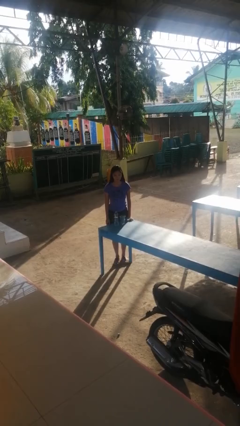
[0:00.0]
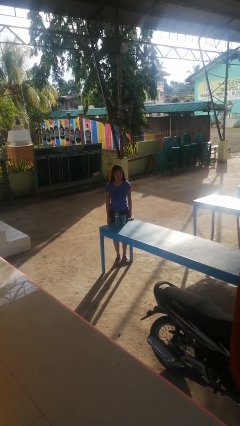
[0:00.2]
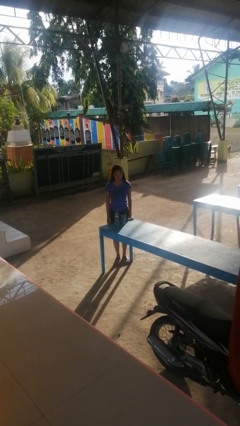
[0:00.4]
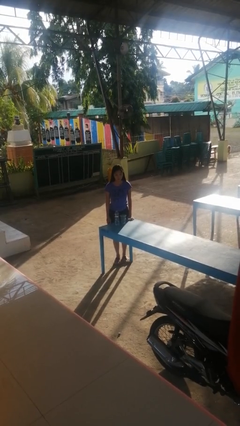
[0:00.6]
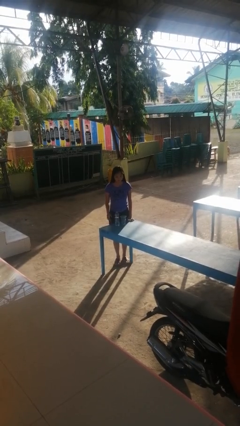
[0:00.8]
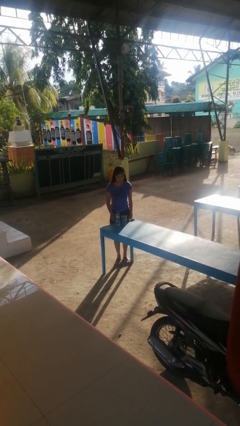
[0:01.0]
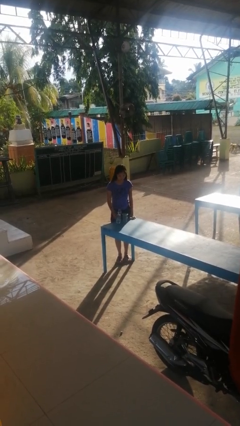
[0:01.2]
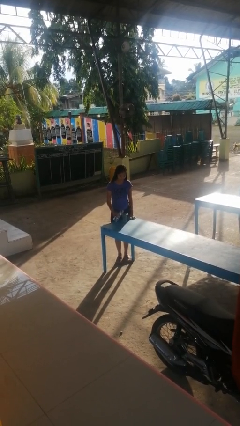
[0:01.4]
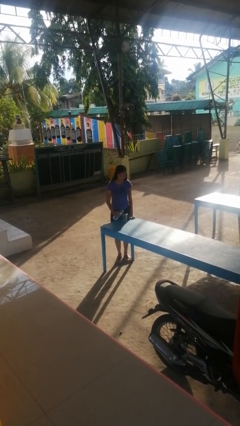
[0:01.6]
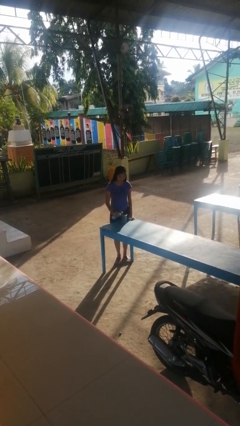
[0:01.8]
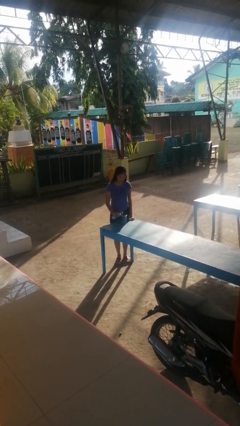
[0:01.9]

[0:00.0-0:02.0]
person pours liquid into cup

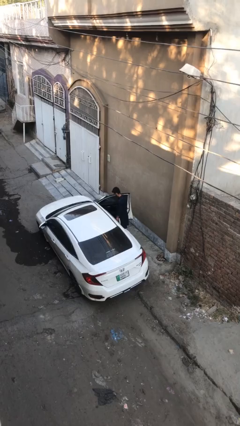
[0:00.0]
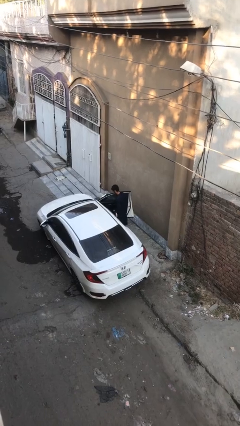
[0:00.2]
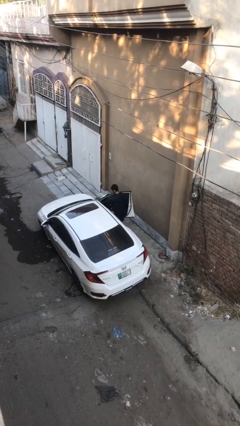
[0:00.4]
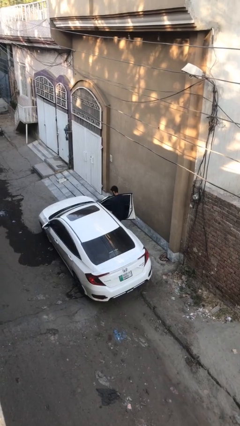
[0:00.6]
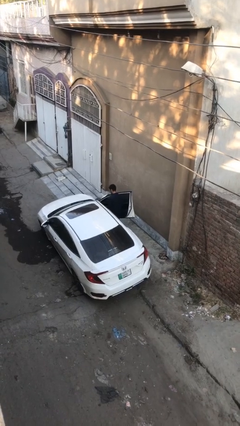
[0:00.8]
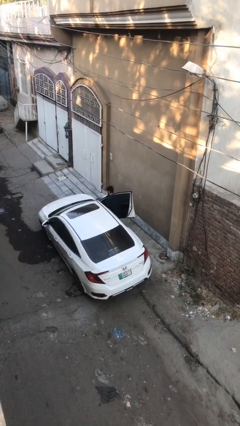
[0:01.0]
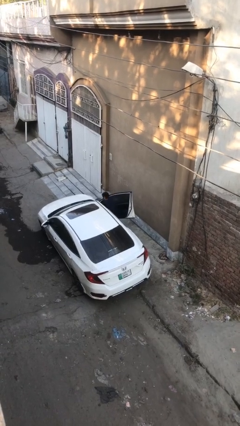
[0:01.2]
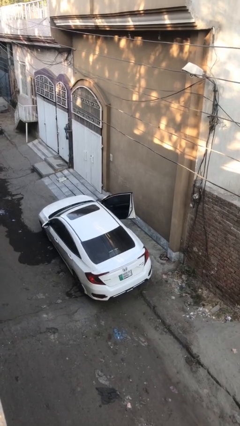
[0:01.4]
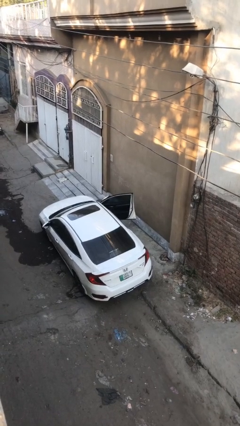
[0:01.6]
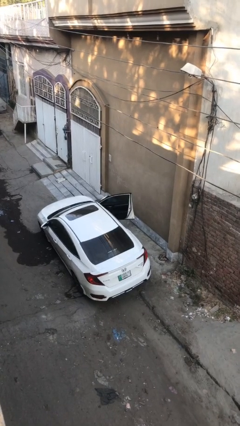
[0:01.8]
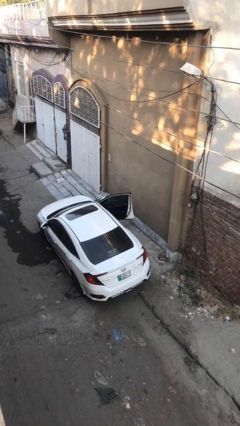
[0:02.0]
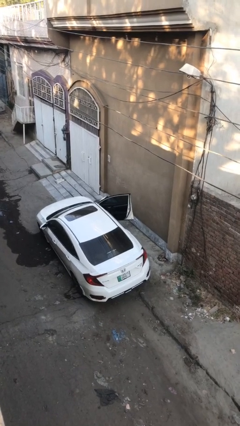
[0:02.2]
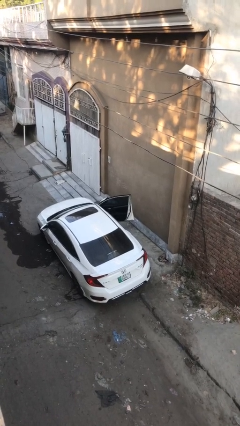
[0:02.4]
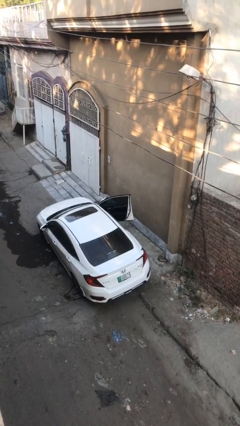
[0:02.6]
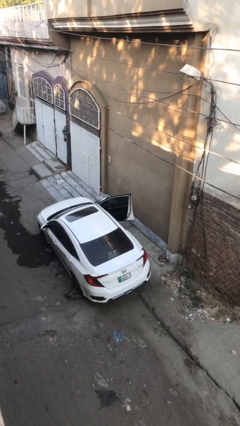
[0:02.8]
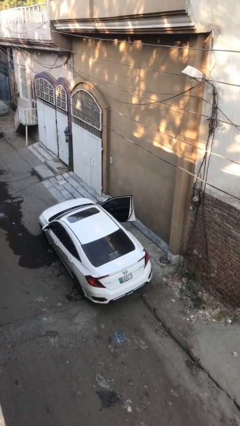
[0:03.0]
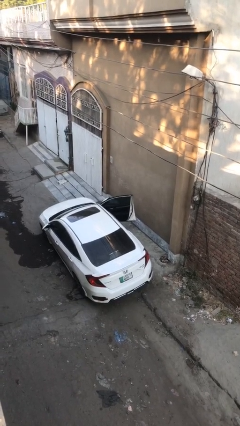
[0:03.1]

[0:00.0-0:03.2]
person enters car

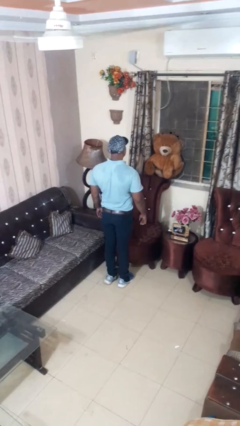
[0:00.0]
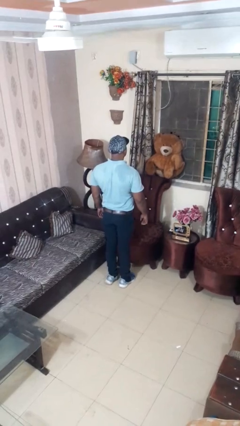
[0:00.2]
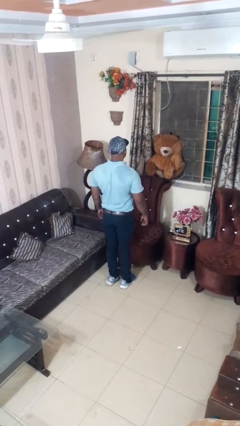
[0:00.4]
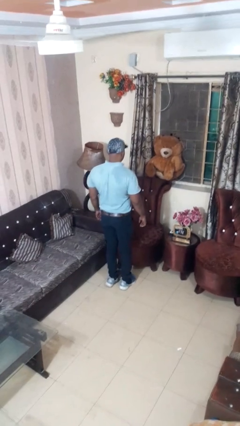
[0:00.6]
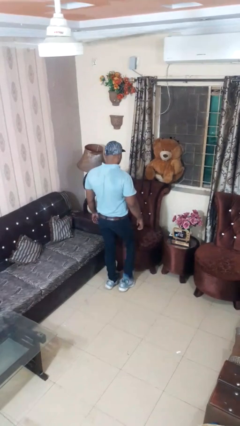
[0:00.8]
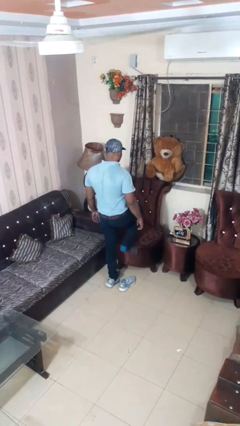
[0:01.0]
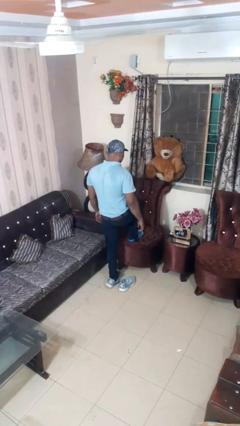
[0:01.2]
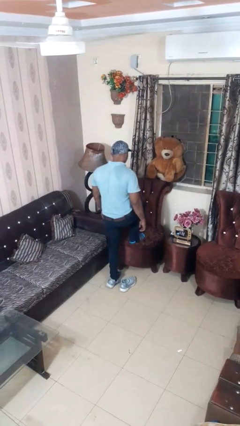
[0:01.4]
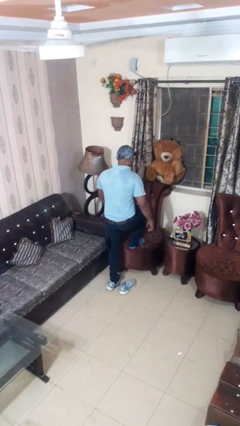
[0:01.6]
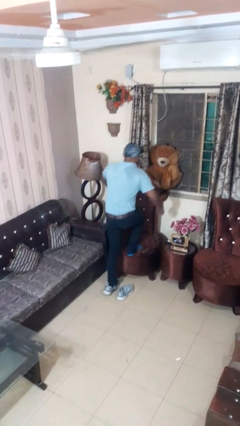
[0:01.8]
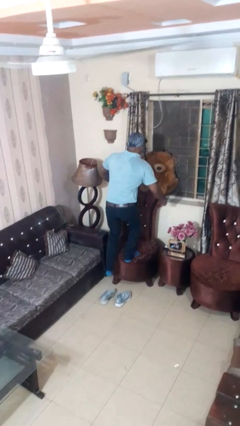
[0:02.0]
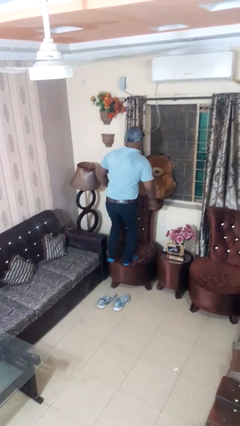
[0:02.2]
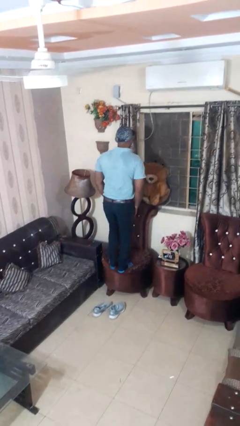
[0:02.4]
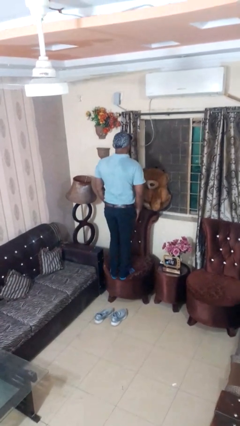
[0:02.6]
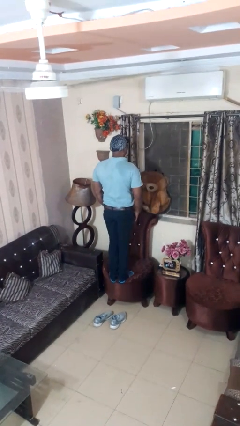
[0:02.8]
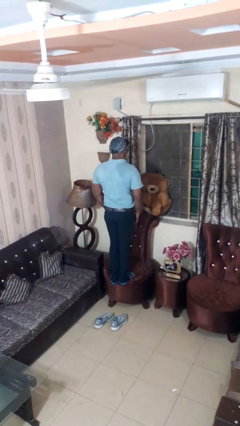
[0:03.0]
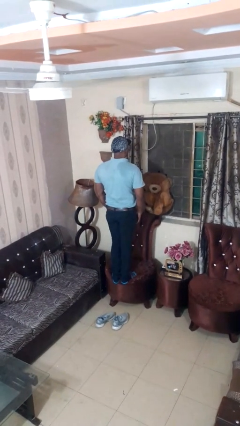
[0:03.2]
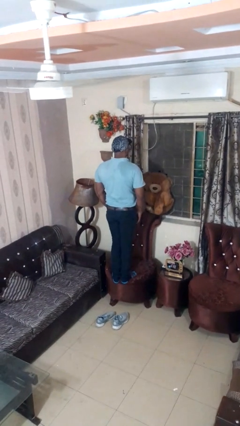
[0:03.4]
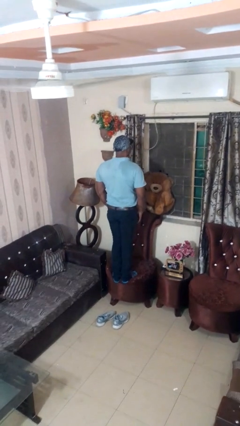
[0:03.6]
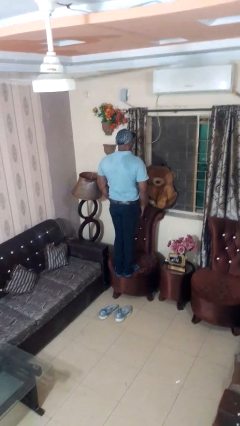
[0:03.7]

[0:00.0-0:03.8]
person climbs on chair

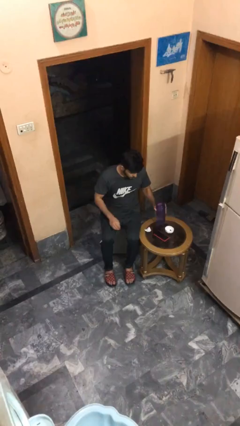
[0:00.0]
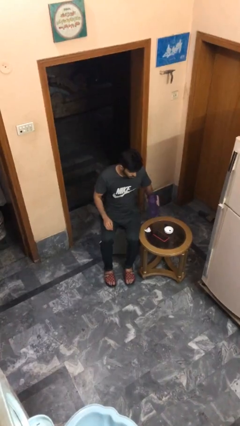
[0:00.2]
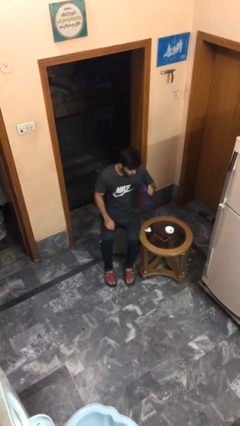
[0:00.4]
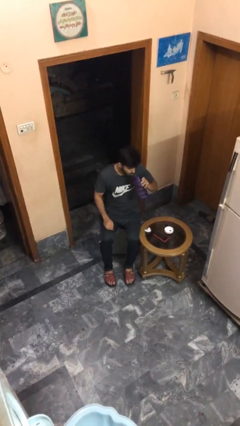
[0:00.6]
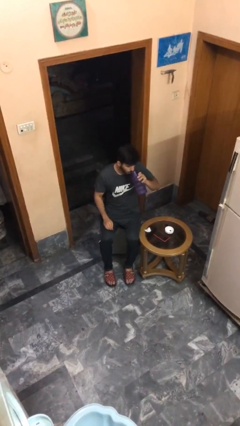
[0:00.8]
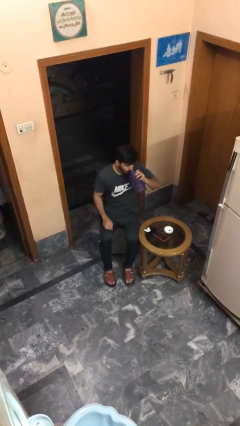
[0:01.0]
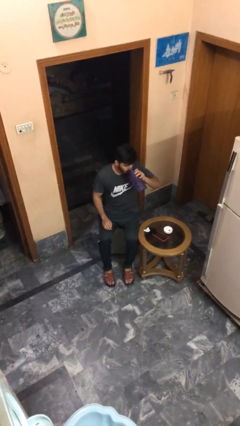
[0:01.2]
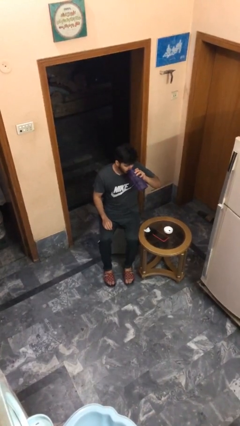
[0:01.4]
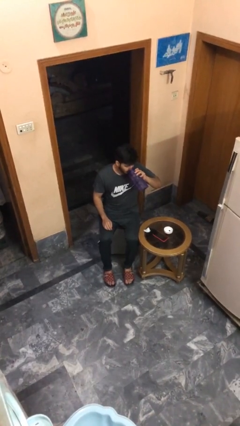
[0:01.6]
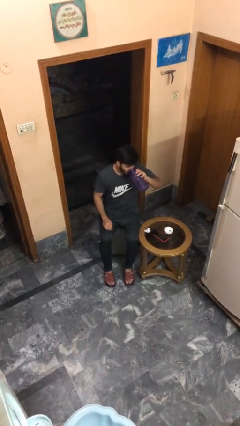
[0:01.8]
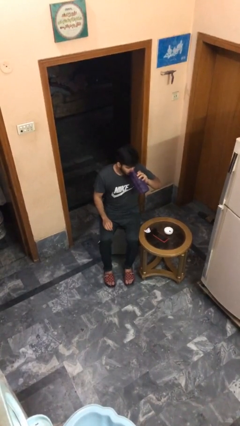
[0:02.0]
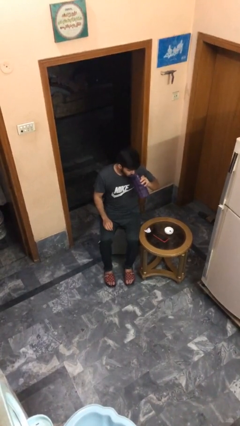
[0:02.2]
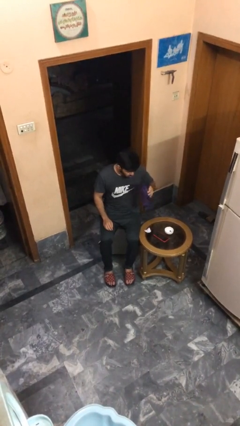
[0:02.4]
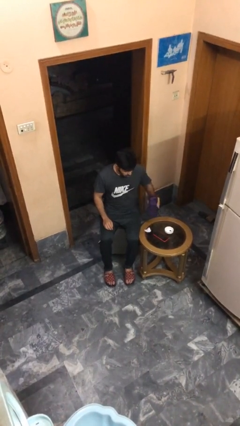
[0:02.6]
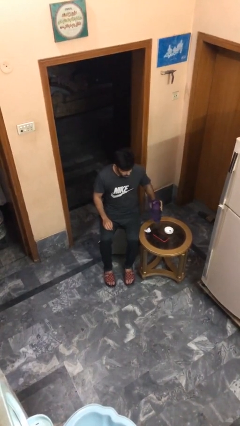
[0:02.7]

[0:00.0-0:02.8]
person drinks from cup

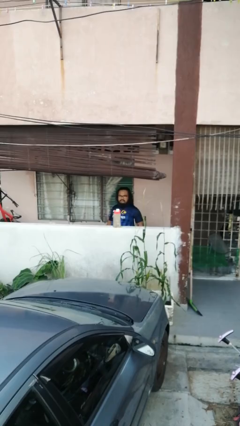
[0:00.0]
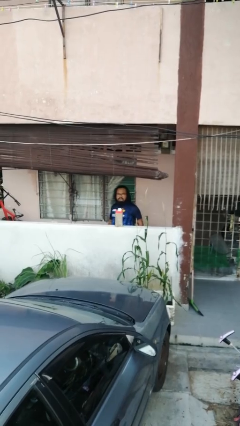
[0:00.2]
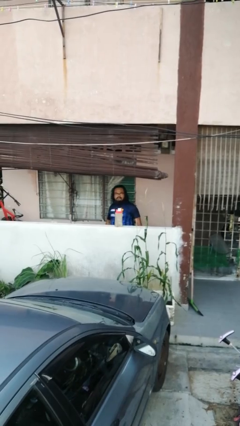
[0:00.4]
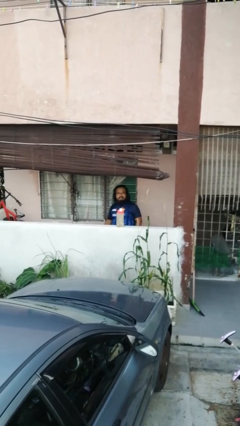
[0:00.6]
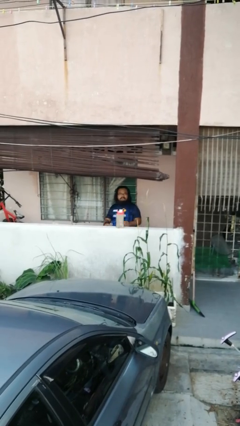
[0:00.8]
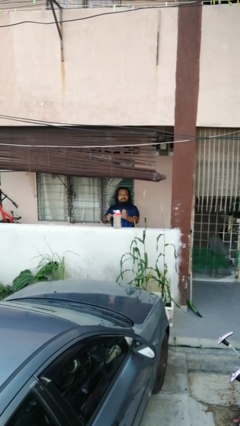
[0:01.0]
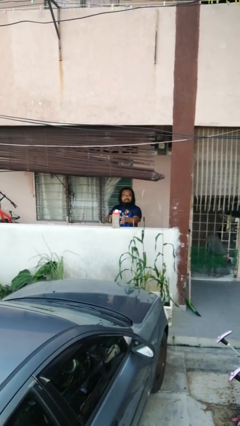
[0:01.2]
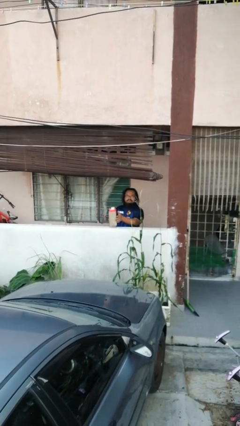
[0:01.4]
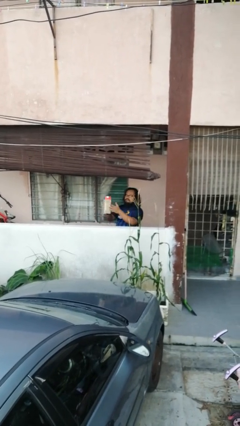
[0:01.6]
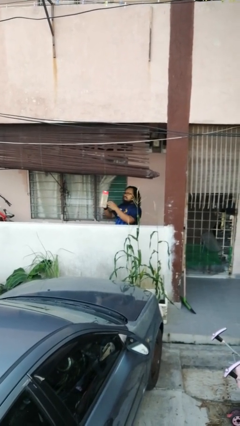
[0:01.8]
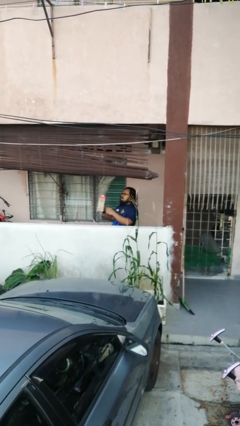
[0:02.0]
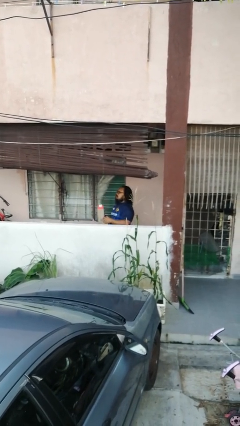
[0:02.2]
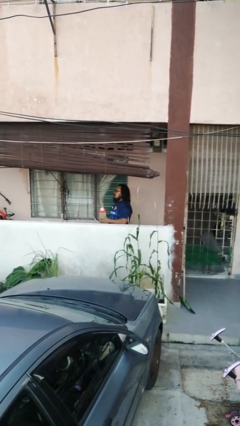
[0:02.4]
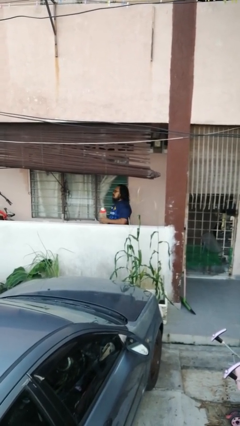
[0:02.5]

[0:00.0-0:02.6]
person picks up object from countertop

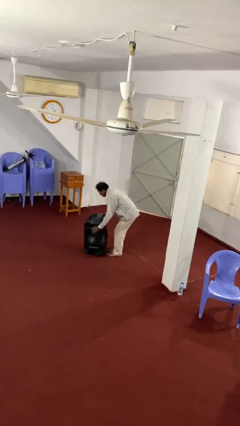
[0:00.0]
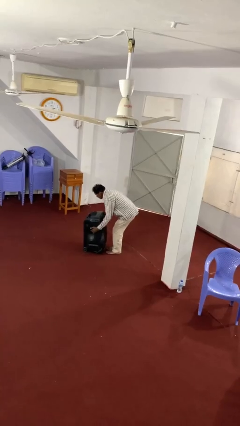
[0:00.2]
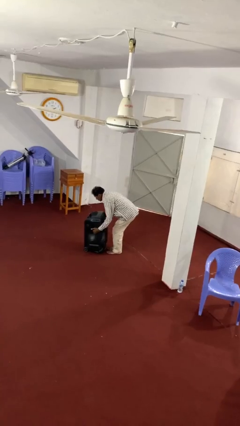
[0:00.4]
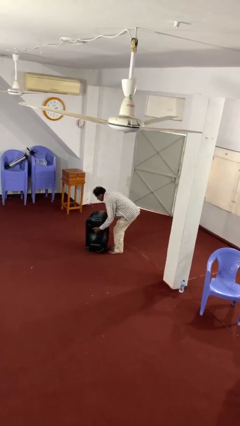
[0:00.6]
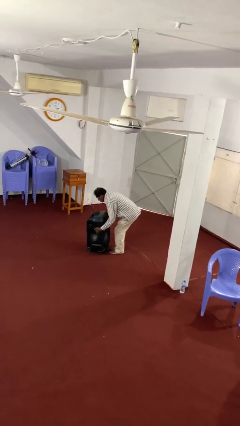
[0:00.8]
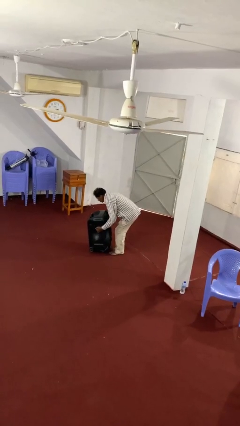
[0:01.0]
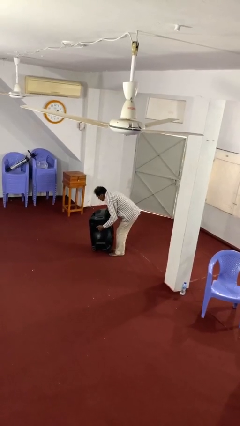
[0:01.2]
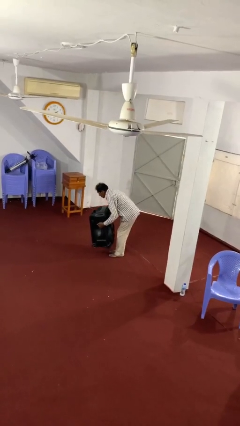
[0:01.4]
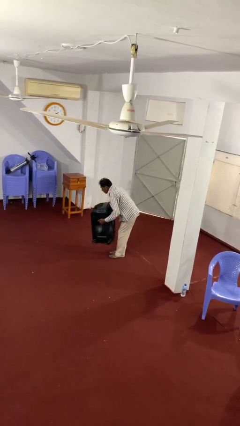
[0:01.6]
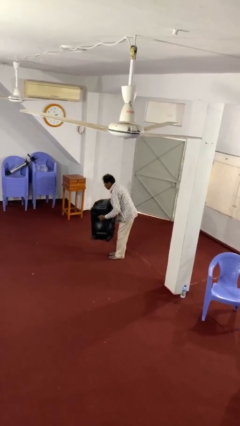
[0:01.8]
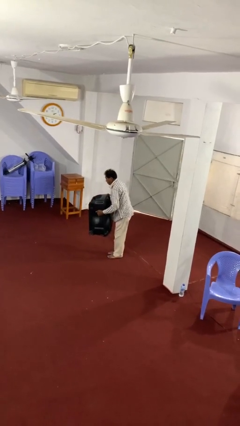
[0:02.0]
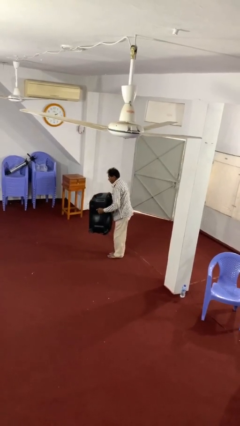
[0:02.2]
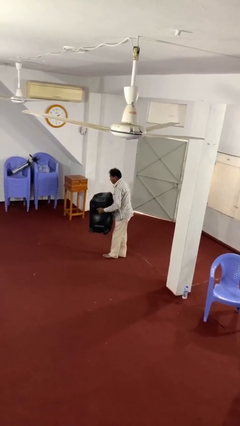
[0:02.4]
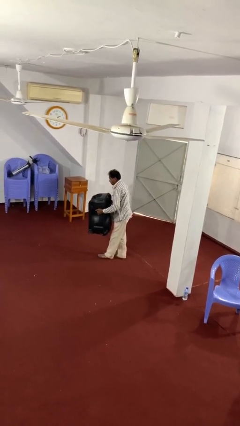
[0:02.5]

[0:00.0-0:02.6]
person picks up object from floor

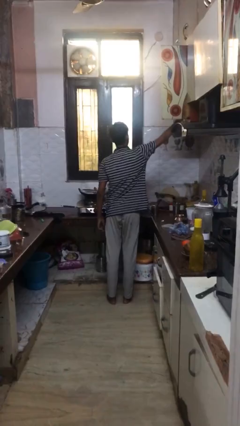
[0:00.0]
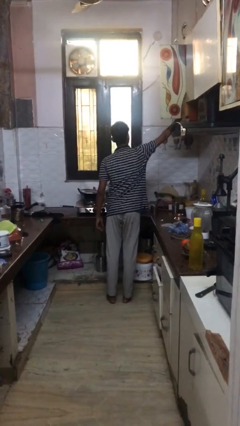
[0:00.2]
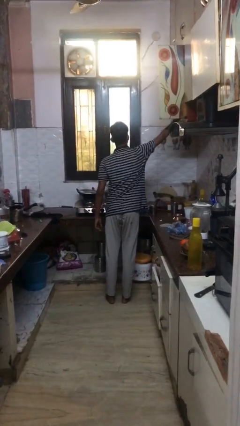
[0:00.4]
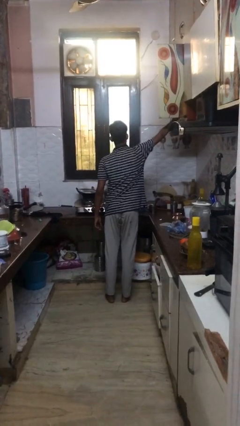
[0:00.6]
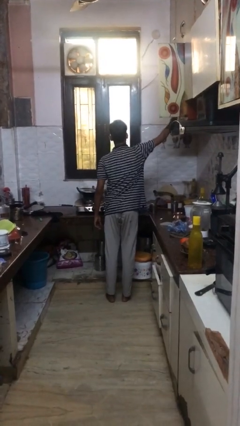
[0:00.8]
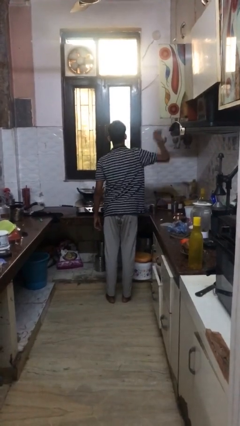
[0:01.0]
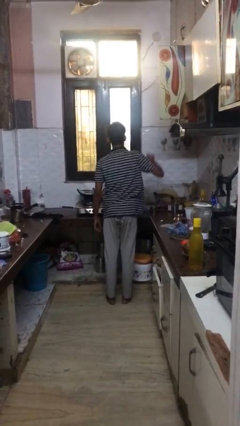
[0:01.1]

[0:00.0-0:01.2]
person takes object from cabinet
